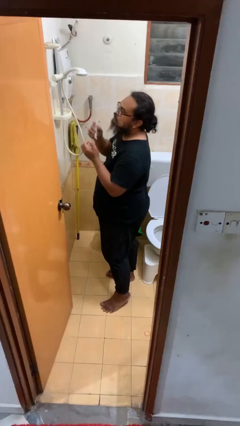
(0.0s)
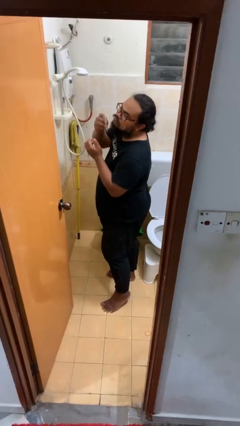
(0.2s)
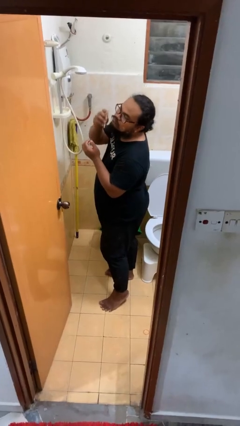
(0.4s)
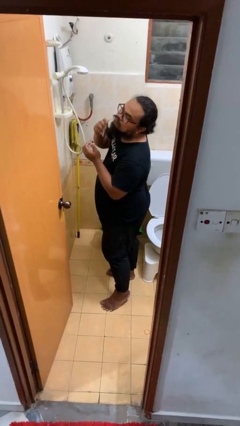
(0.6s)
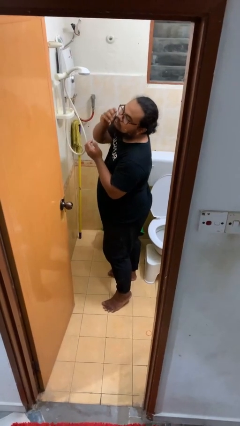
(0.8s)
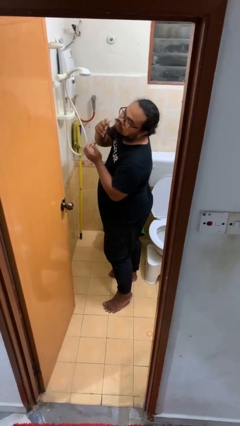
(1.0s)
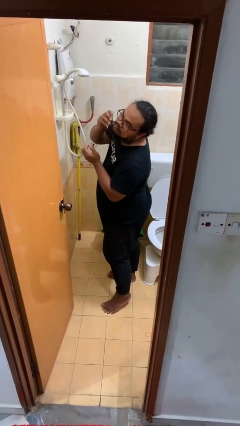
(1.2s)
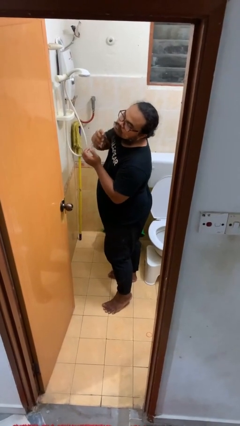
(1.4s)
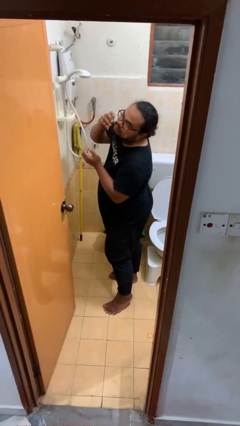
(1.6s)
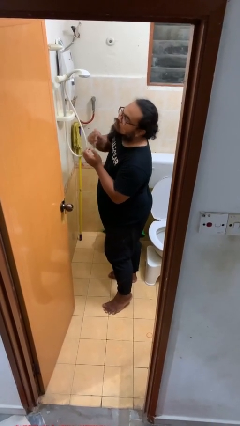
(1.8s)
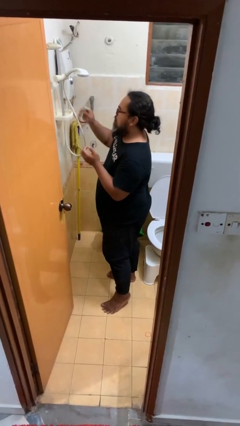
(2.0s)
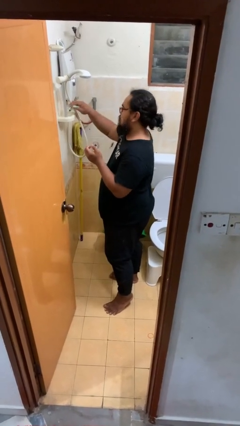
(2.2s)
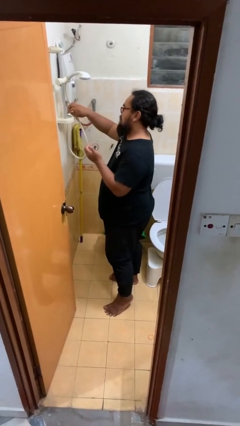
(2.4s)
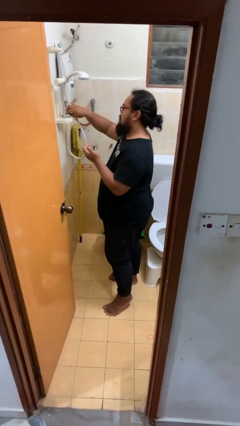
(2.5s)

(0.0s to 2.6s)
person shaves face

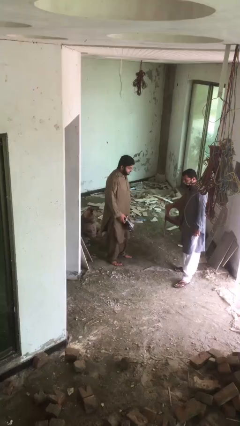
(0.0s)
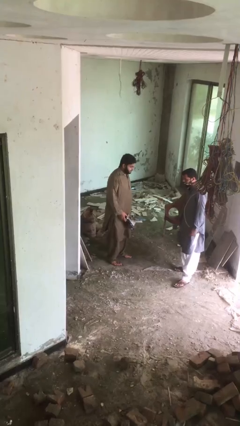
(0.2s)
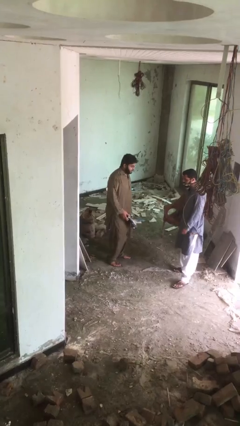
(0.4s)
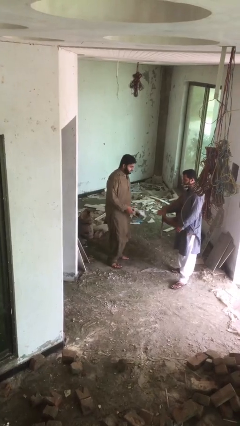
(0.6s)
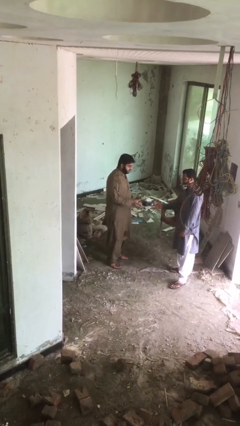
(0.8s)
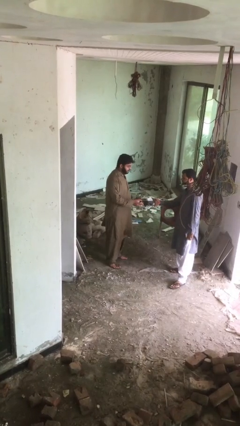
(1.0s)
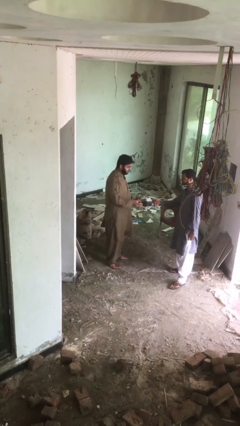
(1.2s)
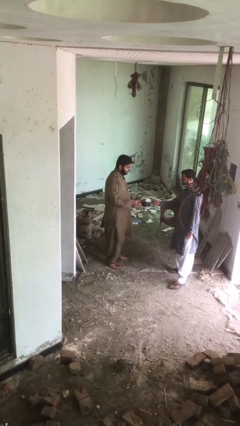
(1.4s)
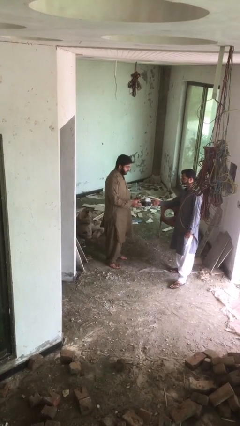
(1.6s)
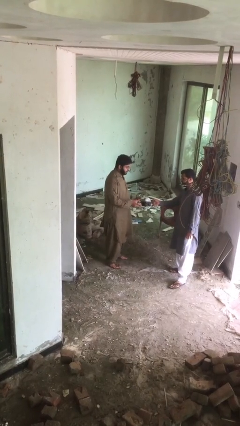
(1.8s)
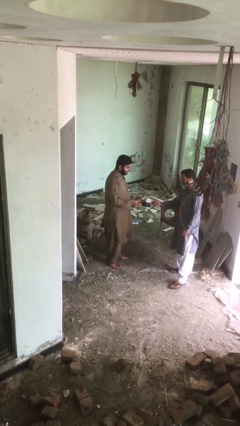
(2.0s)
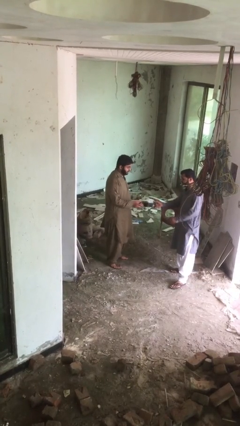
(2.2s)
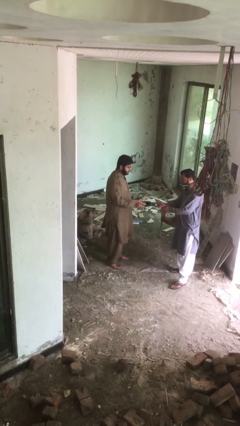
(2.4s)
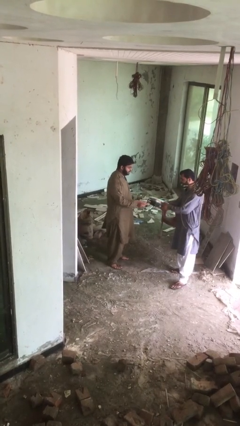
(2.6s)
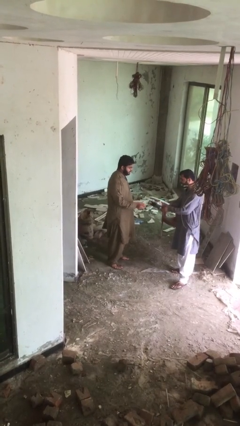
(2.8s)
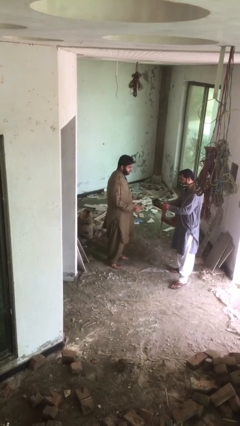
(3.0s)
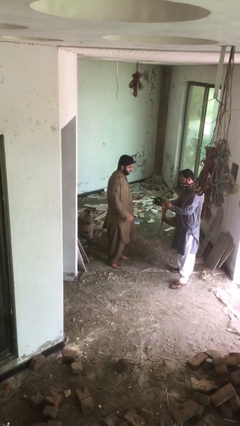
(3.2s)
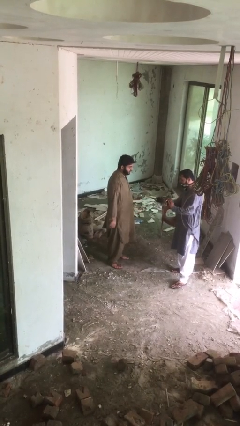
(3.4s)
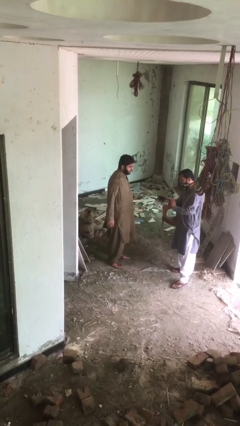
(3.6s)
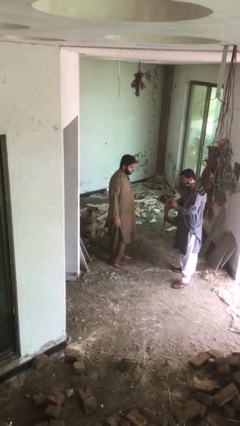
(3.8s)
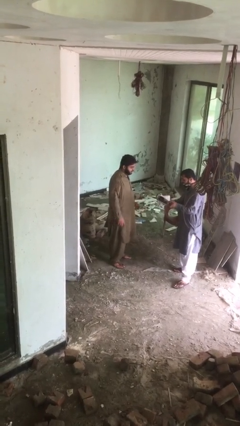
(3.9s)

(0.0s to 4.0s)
person transfers object to person

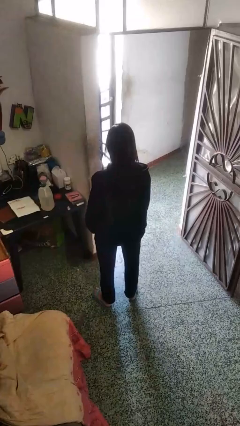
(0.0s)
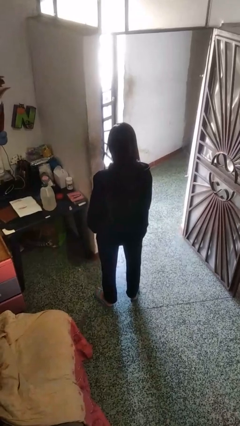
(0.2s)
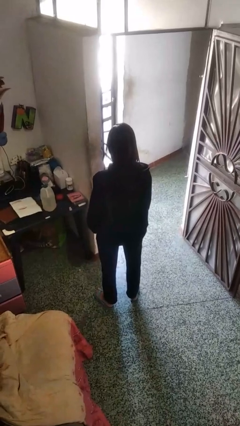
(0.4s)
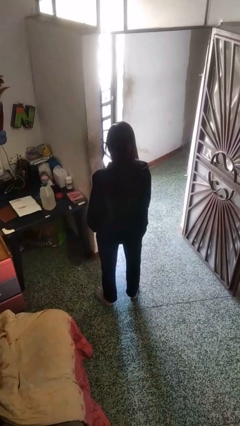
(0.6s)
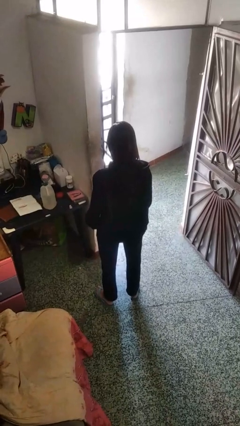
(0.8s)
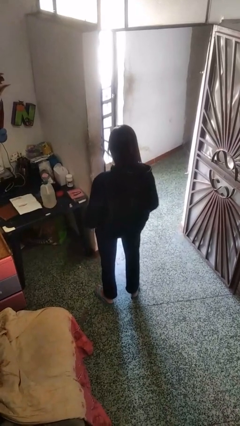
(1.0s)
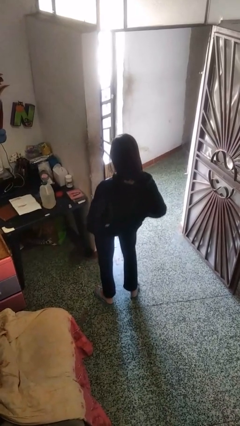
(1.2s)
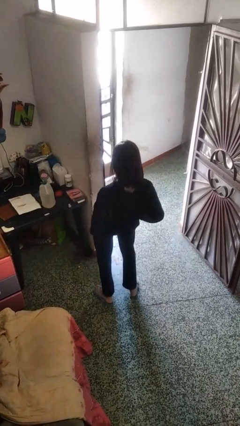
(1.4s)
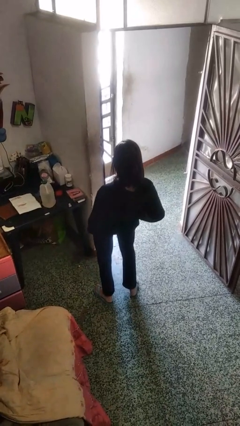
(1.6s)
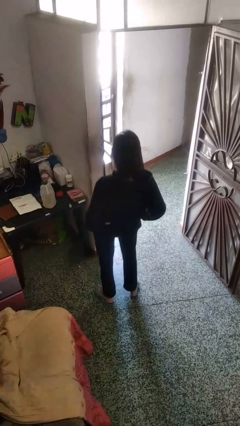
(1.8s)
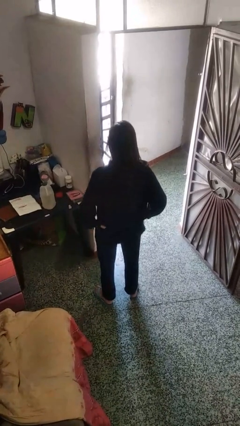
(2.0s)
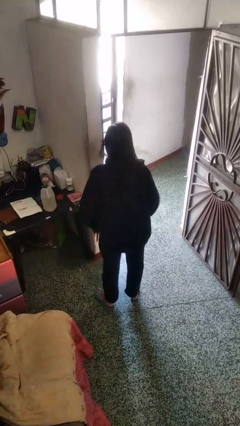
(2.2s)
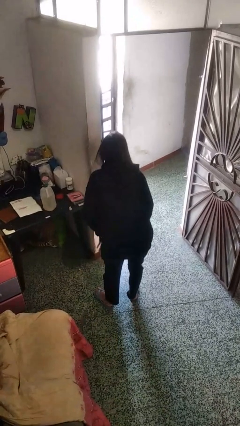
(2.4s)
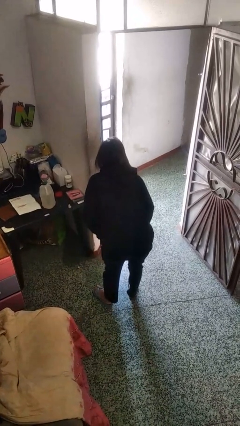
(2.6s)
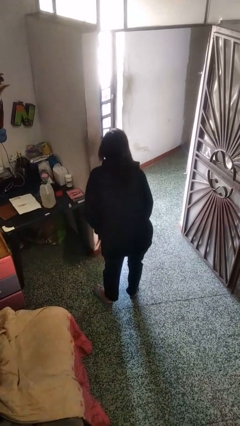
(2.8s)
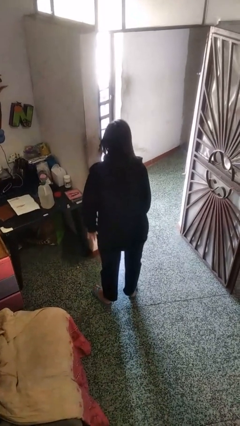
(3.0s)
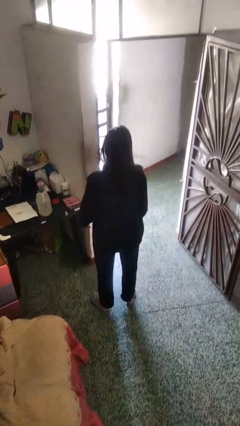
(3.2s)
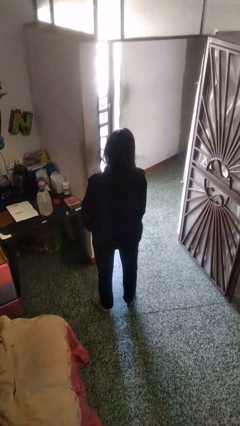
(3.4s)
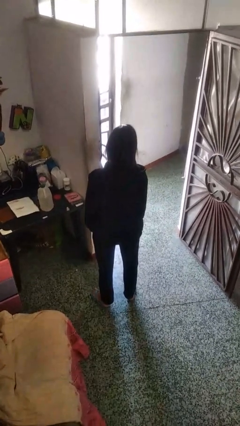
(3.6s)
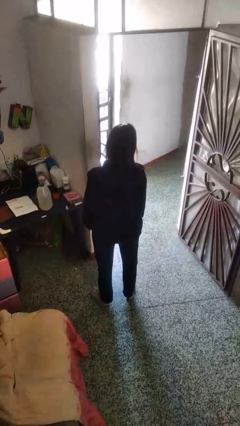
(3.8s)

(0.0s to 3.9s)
person wiggles hips

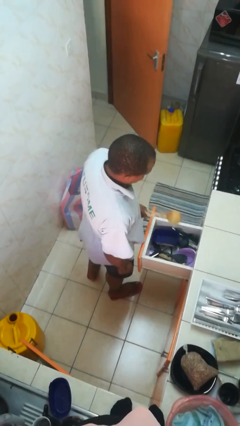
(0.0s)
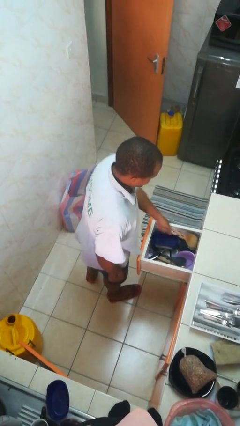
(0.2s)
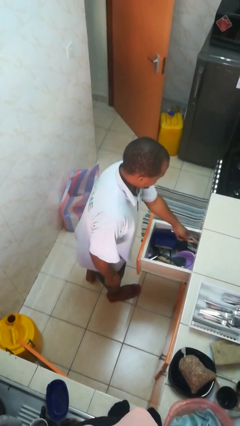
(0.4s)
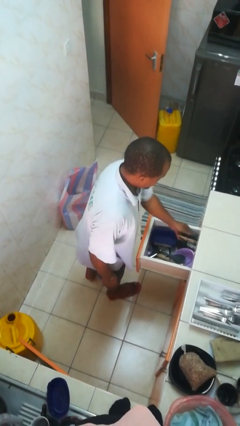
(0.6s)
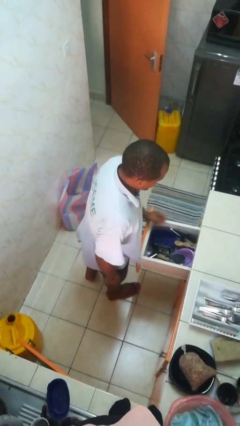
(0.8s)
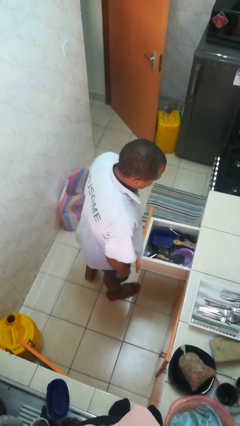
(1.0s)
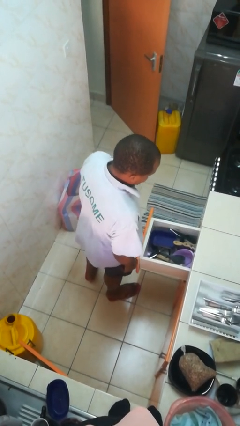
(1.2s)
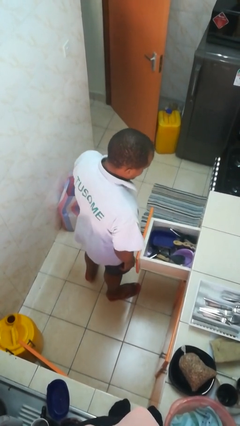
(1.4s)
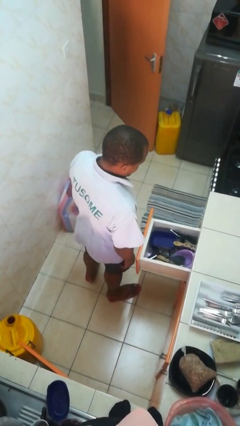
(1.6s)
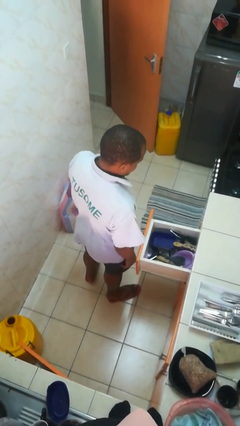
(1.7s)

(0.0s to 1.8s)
person puts object into kitchen drawer

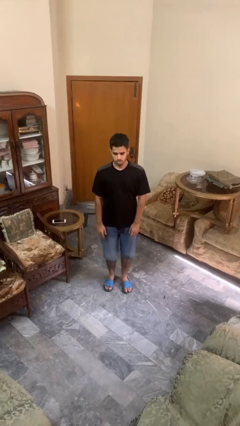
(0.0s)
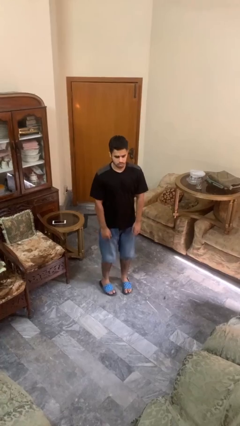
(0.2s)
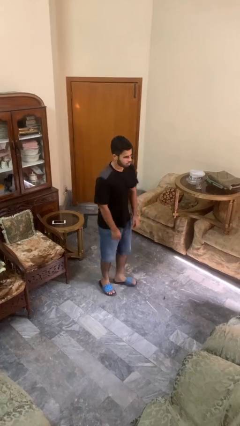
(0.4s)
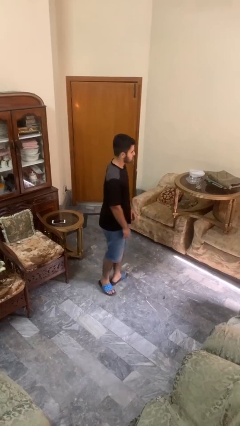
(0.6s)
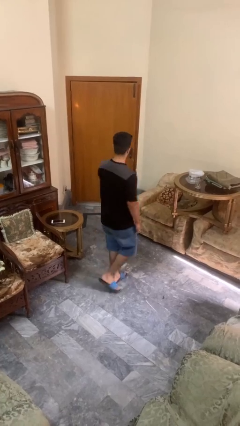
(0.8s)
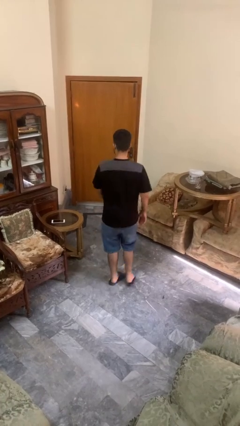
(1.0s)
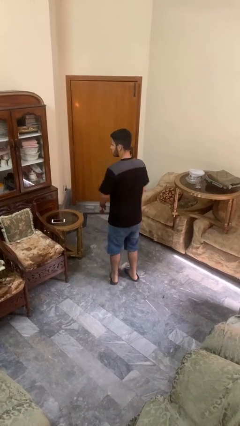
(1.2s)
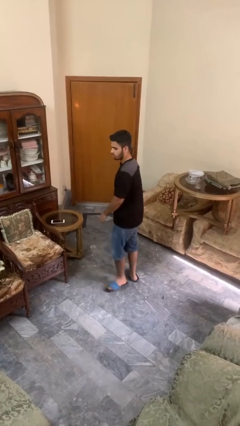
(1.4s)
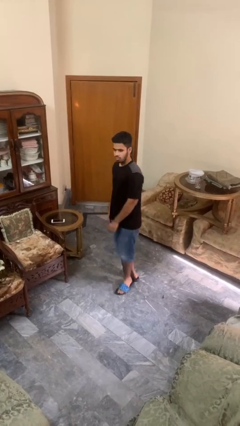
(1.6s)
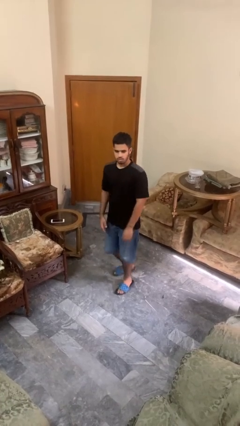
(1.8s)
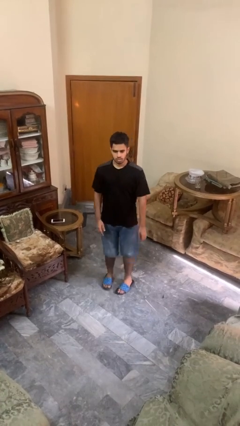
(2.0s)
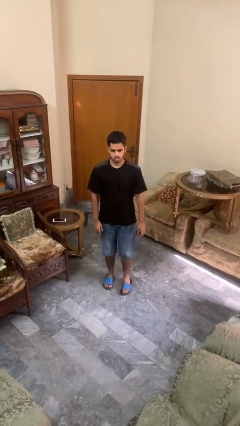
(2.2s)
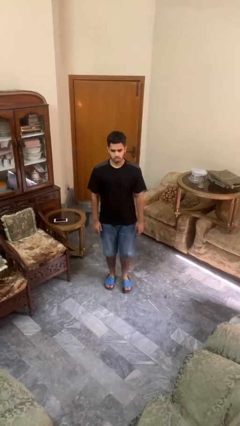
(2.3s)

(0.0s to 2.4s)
person twirls

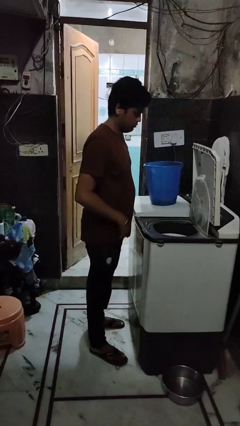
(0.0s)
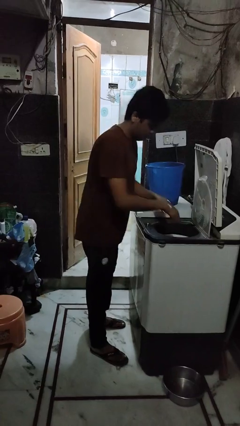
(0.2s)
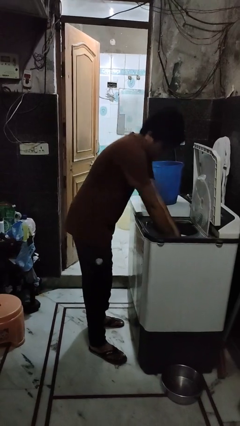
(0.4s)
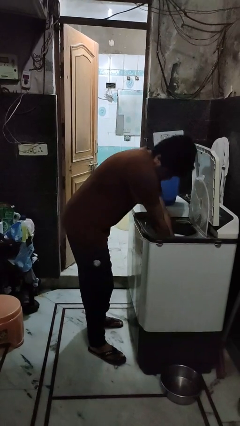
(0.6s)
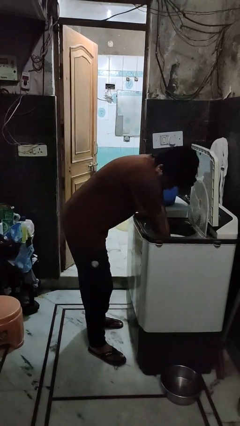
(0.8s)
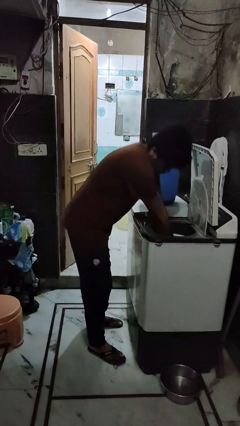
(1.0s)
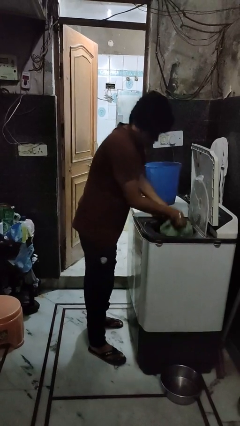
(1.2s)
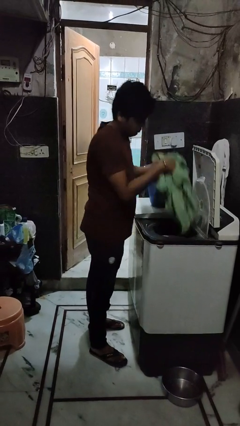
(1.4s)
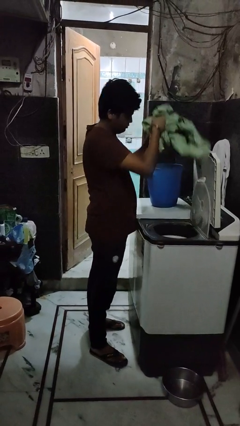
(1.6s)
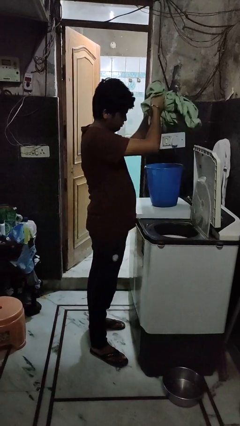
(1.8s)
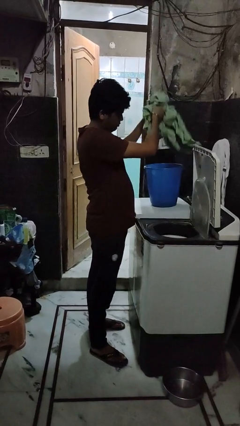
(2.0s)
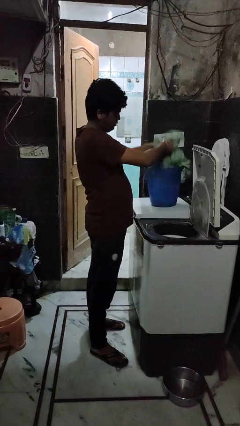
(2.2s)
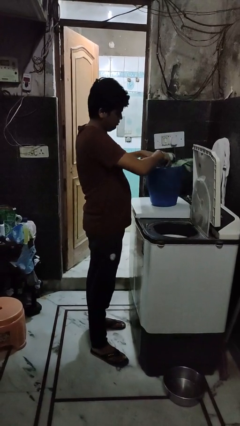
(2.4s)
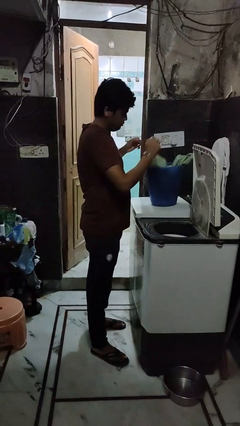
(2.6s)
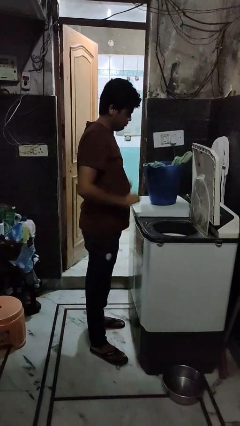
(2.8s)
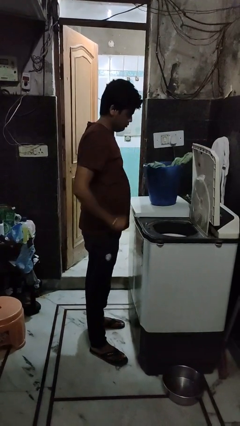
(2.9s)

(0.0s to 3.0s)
person unloads dryer
